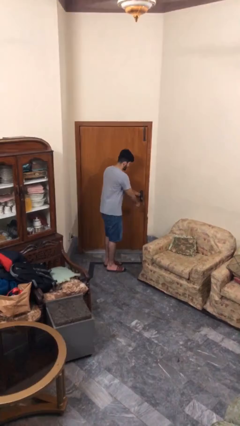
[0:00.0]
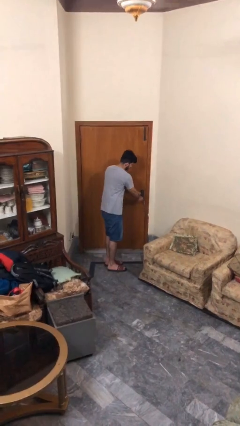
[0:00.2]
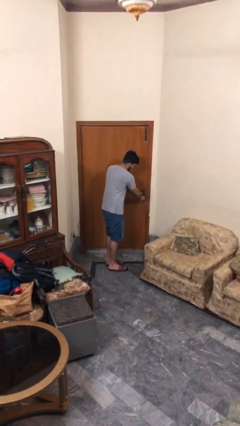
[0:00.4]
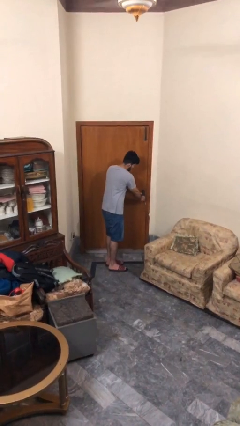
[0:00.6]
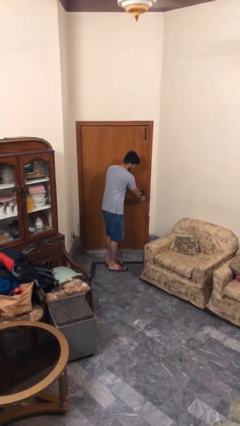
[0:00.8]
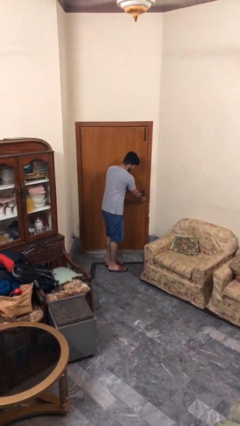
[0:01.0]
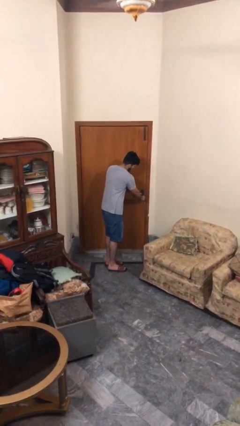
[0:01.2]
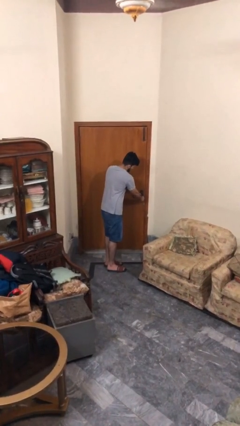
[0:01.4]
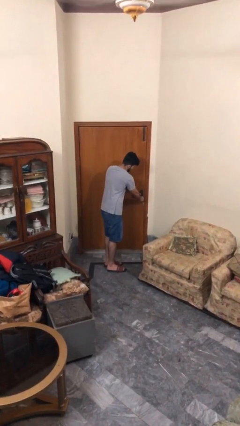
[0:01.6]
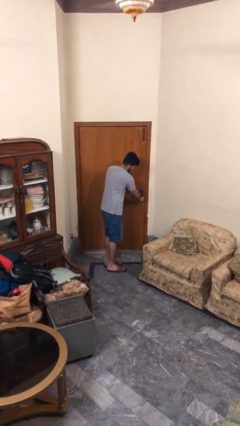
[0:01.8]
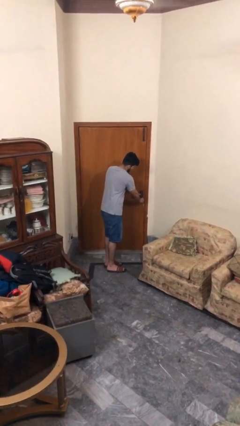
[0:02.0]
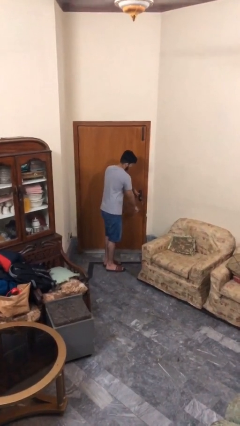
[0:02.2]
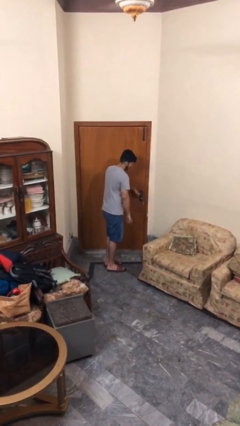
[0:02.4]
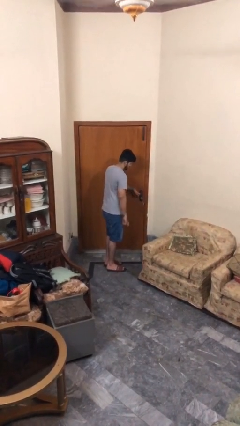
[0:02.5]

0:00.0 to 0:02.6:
person unlocks door with keys

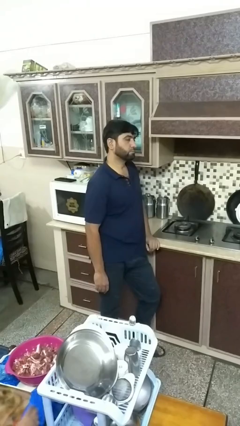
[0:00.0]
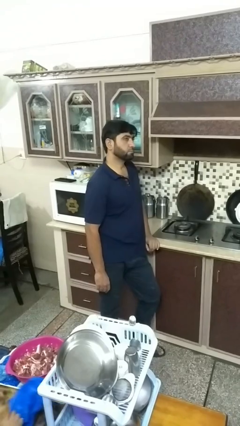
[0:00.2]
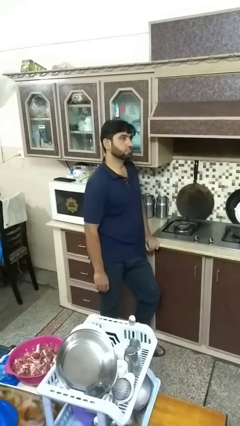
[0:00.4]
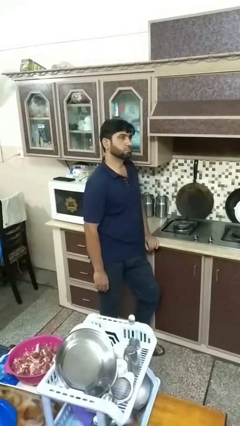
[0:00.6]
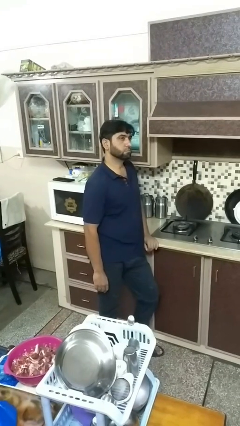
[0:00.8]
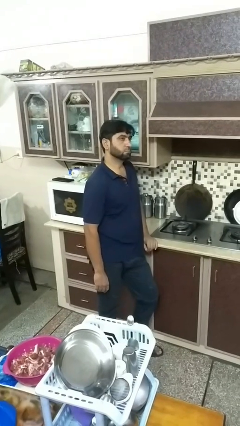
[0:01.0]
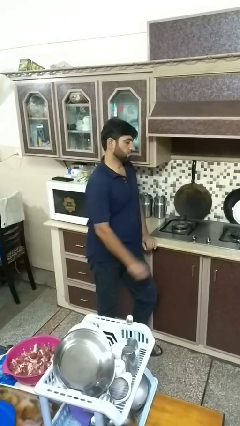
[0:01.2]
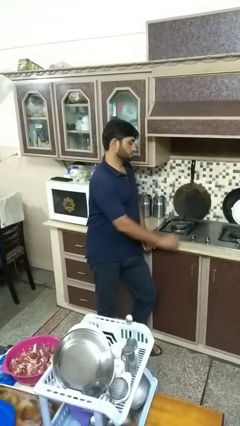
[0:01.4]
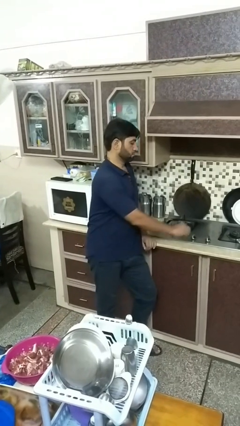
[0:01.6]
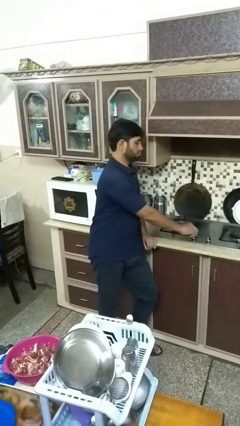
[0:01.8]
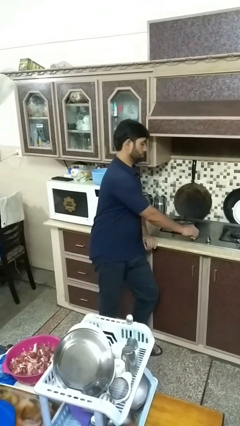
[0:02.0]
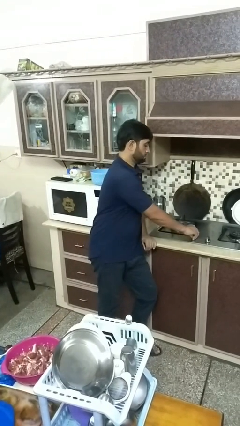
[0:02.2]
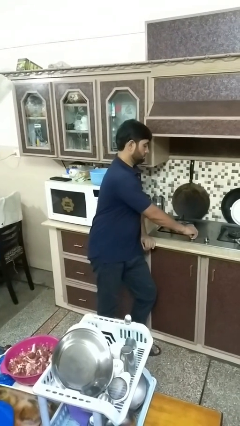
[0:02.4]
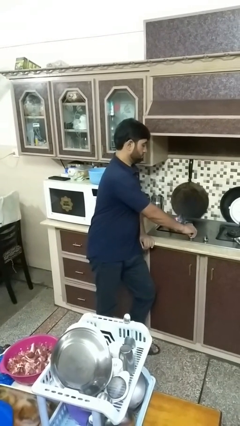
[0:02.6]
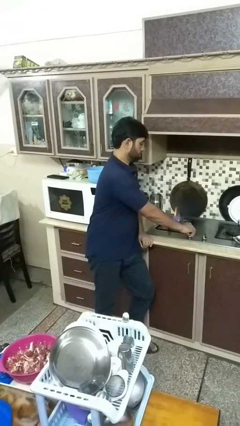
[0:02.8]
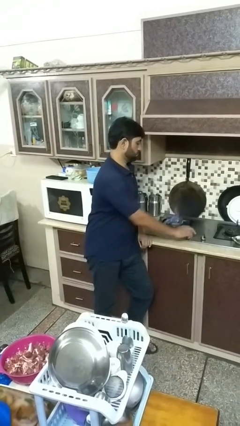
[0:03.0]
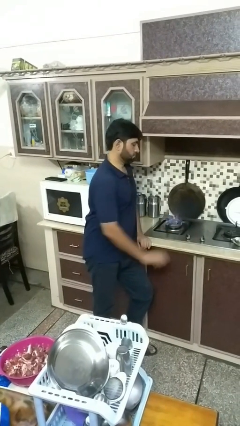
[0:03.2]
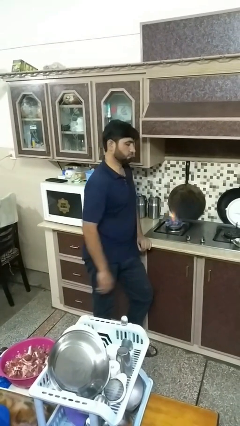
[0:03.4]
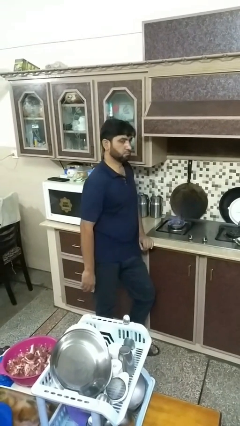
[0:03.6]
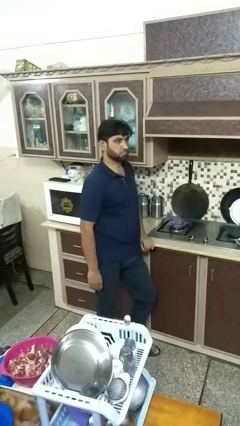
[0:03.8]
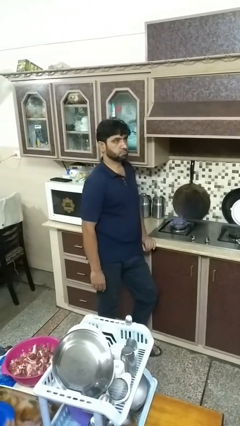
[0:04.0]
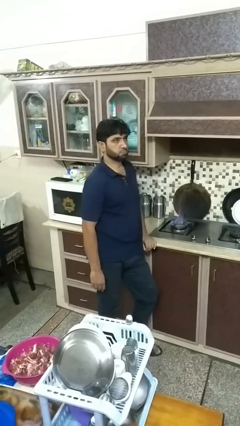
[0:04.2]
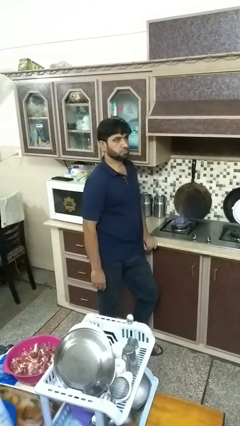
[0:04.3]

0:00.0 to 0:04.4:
person turns on stovetop

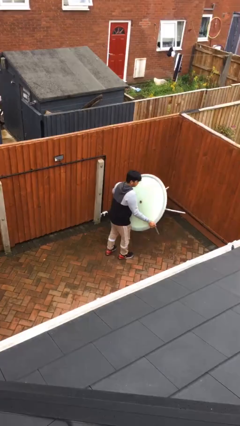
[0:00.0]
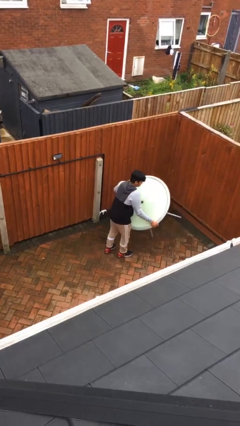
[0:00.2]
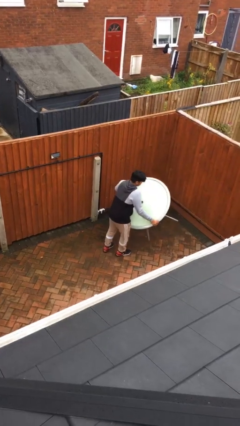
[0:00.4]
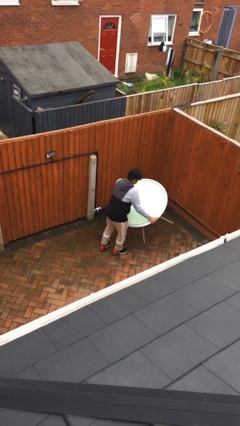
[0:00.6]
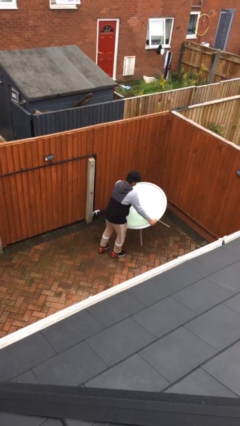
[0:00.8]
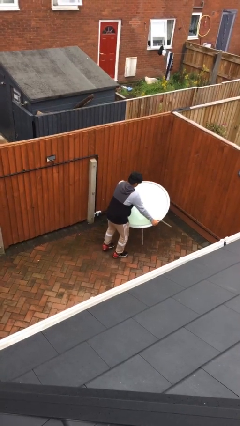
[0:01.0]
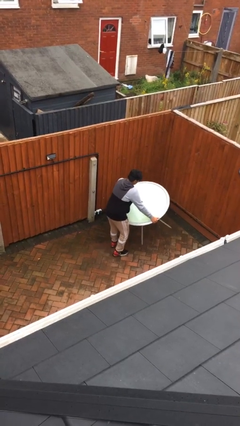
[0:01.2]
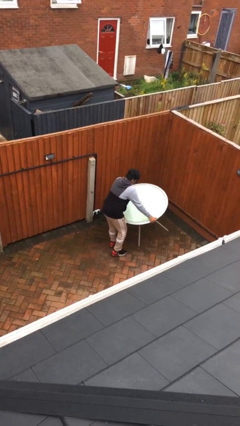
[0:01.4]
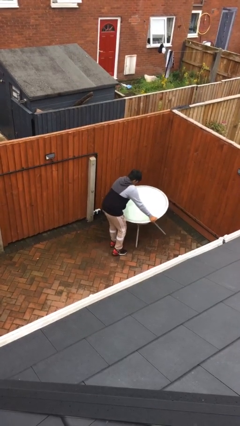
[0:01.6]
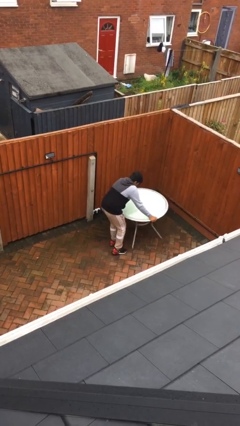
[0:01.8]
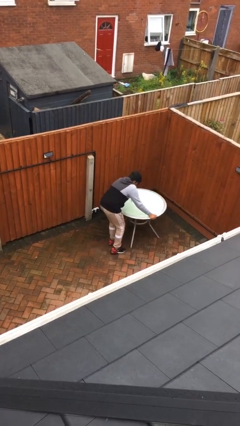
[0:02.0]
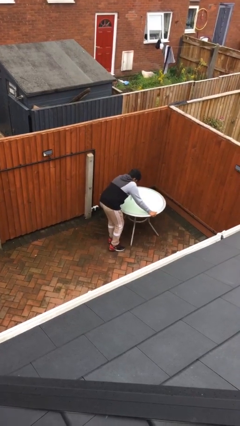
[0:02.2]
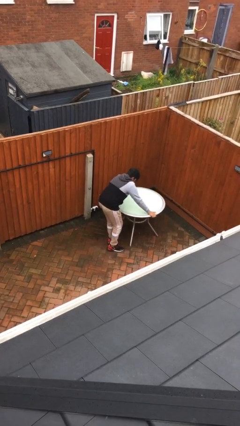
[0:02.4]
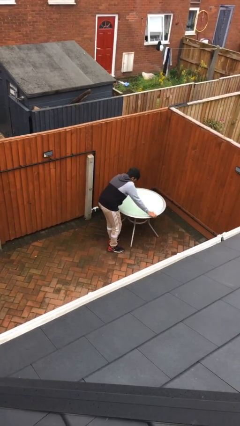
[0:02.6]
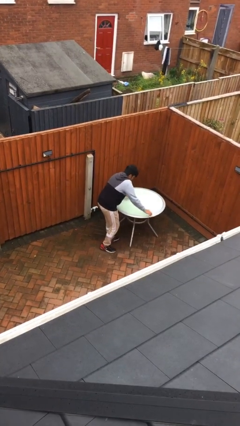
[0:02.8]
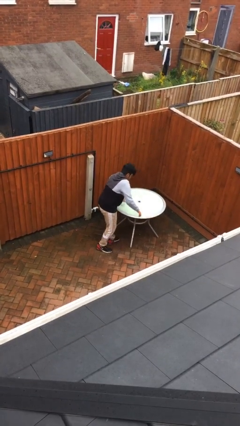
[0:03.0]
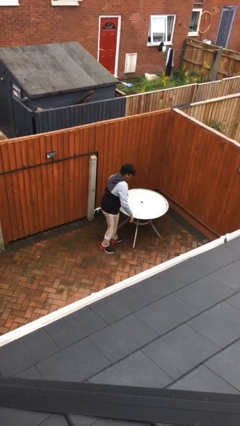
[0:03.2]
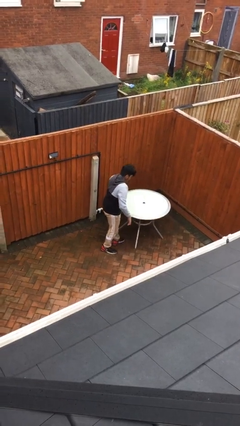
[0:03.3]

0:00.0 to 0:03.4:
person puts down object on floor

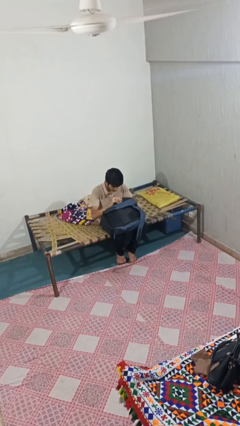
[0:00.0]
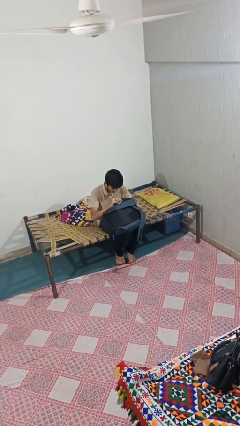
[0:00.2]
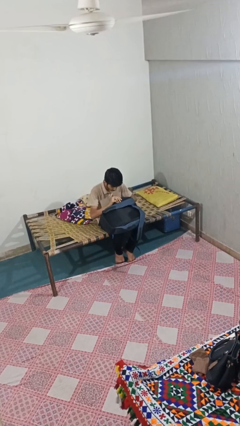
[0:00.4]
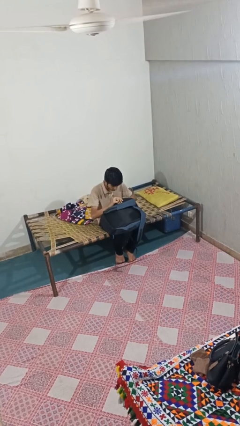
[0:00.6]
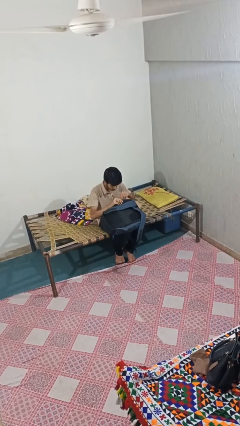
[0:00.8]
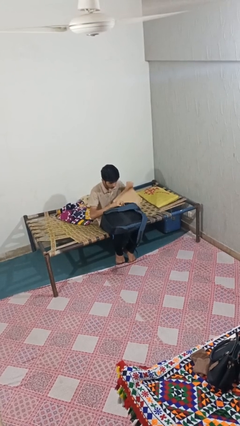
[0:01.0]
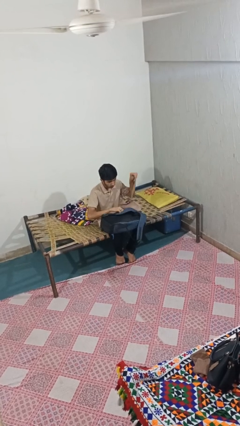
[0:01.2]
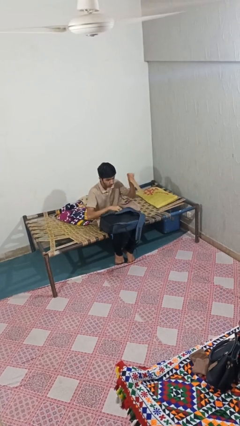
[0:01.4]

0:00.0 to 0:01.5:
person takes object from backpack

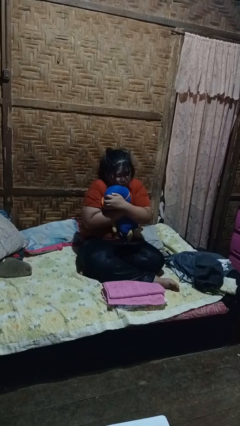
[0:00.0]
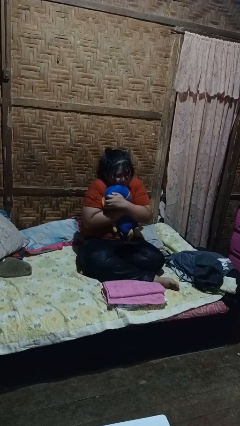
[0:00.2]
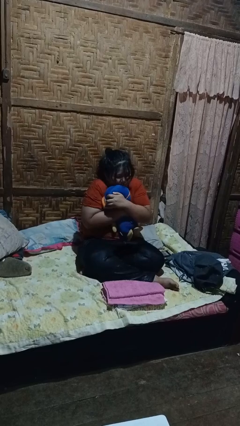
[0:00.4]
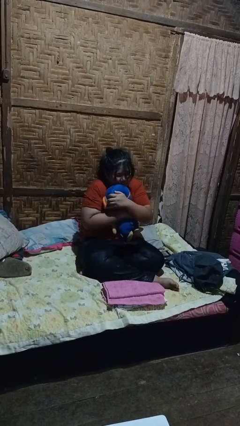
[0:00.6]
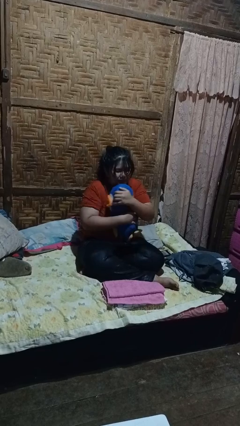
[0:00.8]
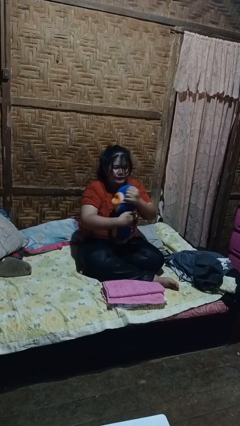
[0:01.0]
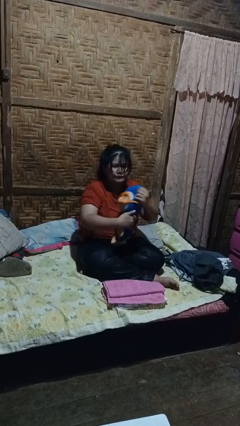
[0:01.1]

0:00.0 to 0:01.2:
person hugs stuffed animal

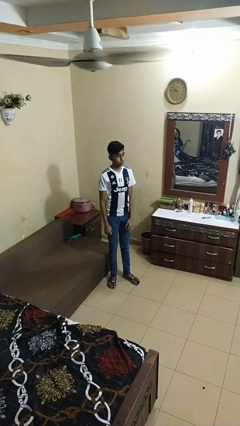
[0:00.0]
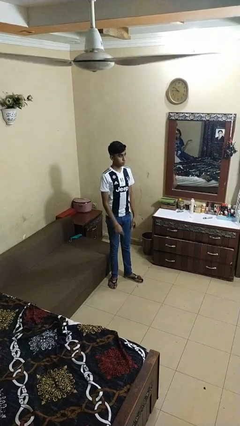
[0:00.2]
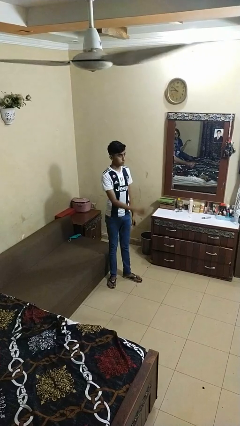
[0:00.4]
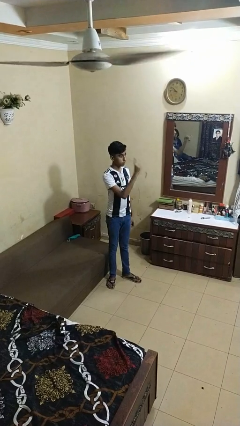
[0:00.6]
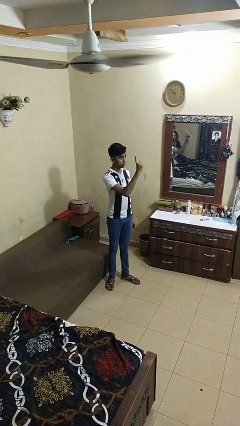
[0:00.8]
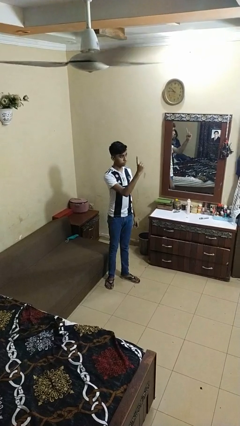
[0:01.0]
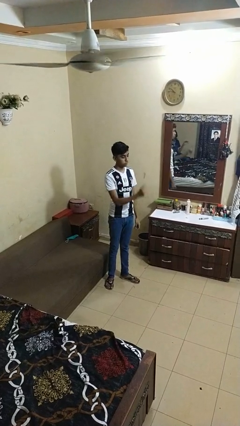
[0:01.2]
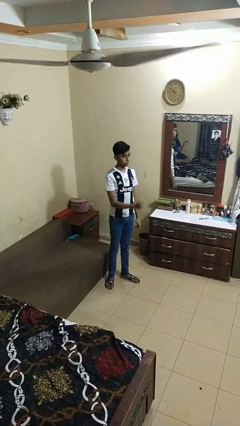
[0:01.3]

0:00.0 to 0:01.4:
person gestures number one

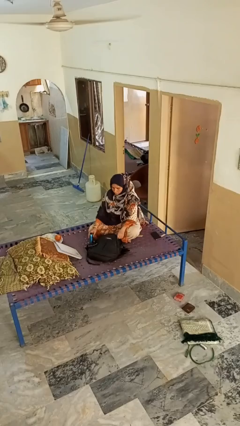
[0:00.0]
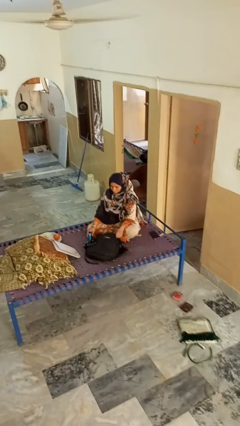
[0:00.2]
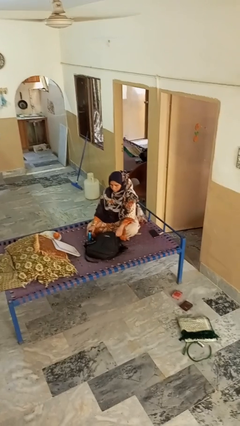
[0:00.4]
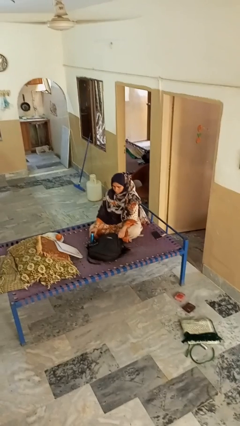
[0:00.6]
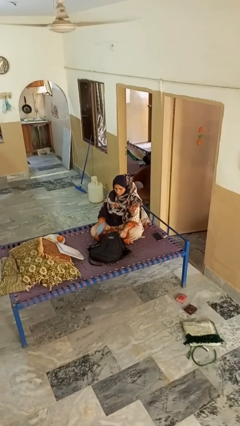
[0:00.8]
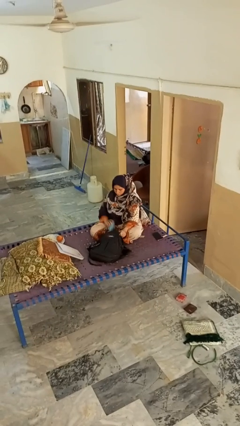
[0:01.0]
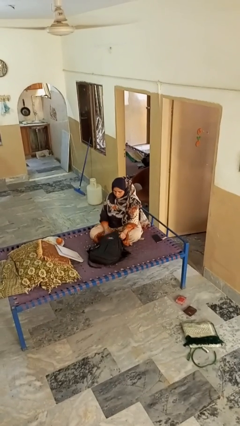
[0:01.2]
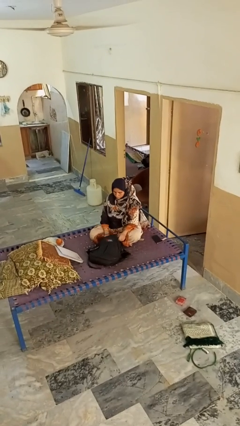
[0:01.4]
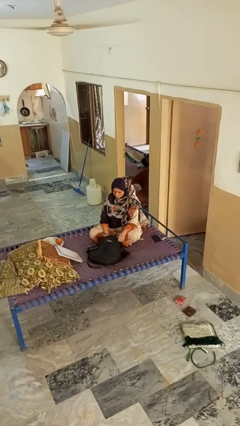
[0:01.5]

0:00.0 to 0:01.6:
person puts object into bag

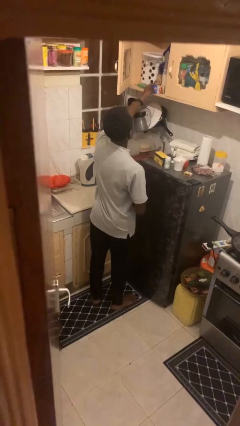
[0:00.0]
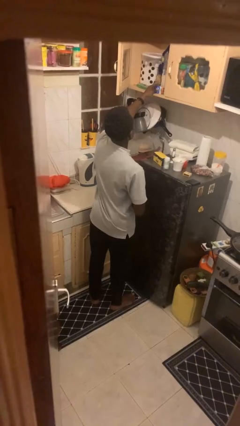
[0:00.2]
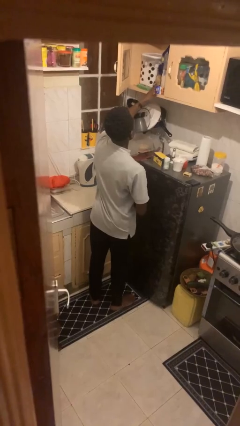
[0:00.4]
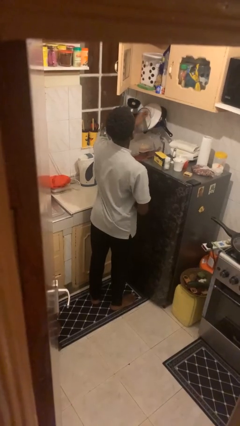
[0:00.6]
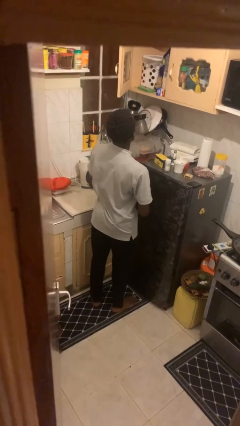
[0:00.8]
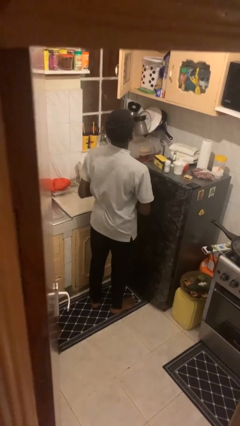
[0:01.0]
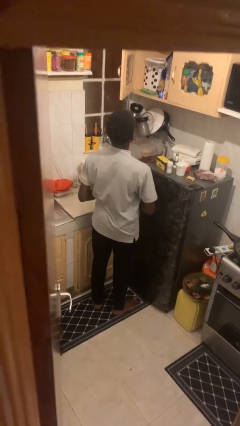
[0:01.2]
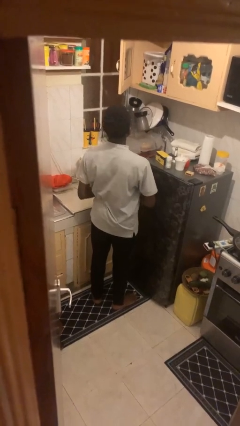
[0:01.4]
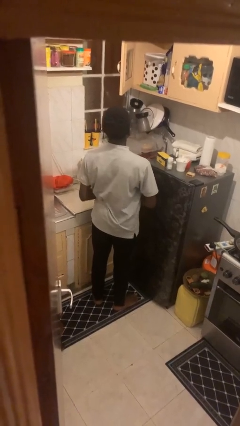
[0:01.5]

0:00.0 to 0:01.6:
person puts down object into cabinet
